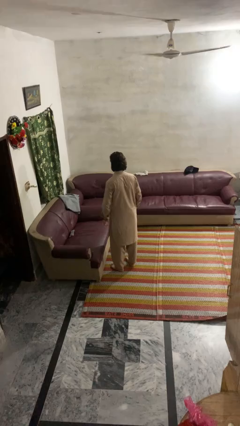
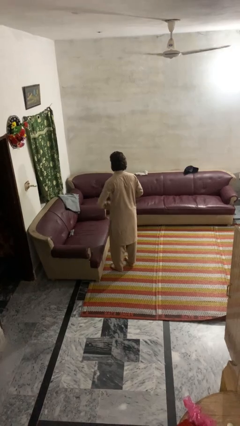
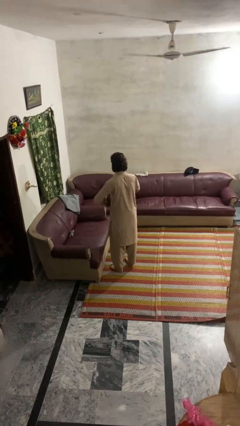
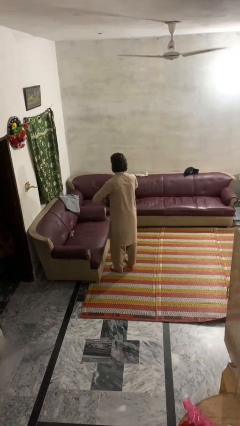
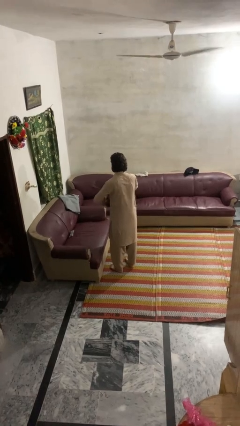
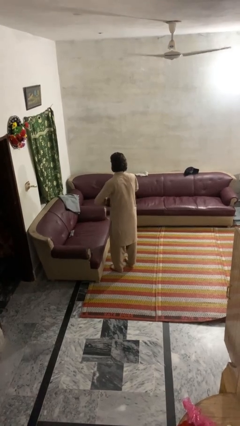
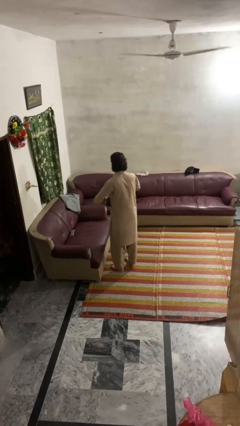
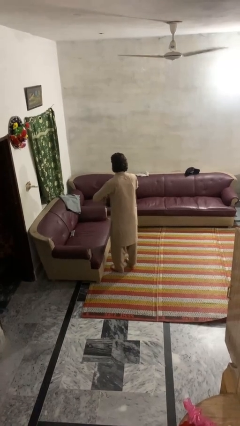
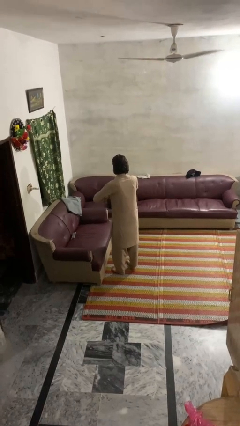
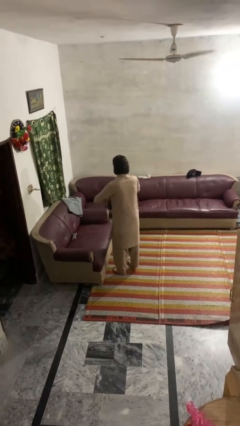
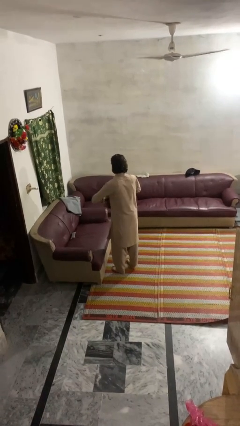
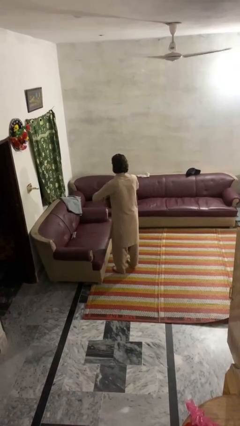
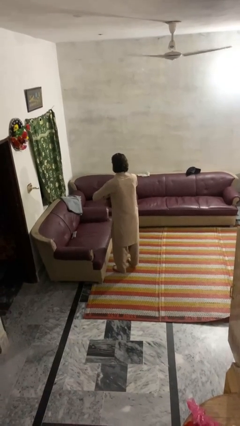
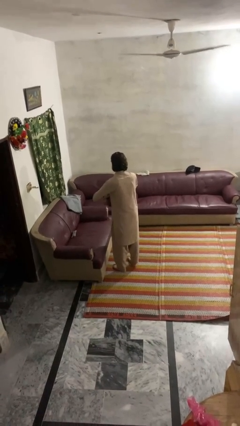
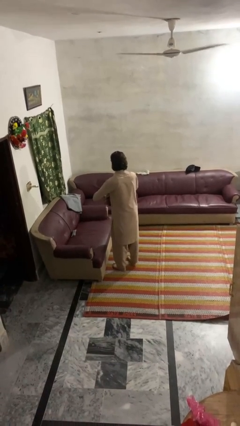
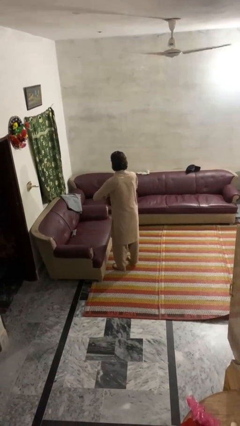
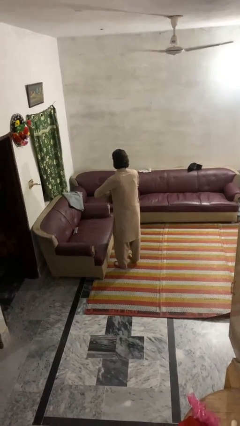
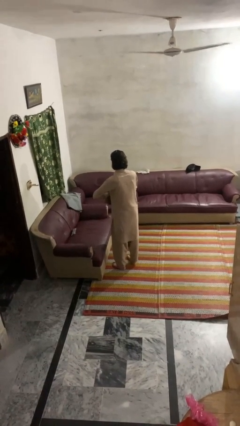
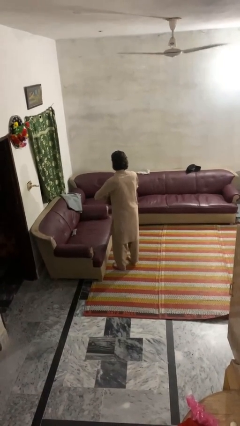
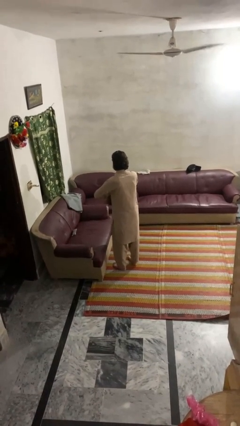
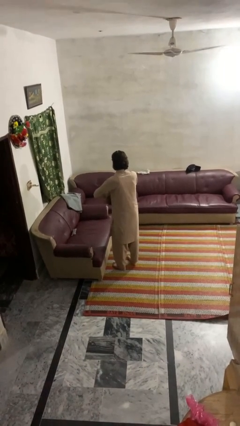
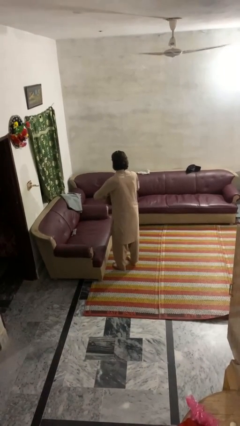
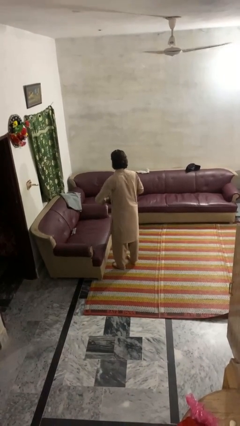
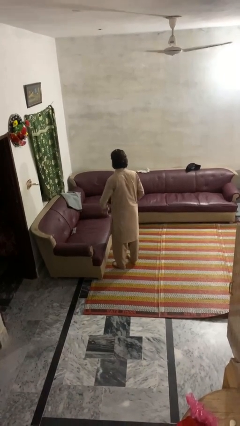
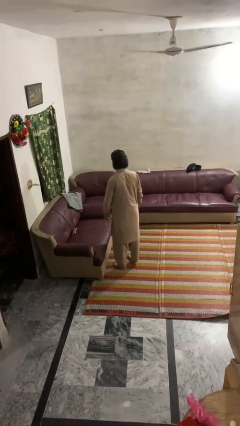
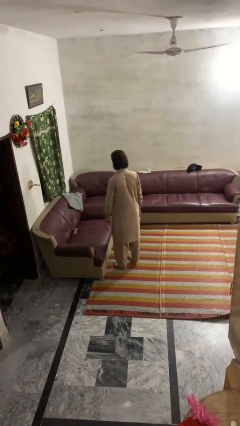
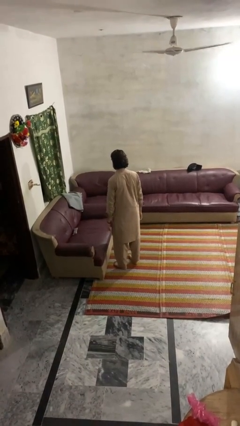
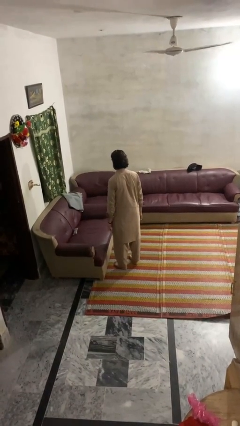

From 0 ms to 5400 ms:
person cracks knuckles

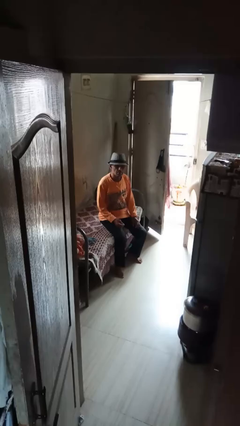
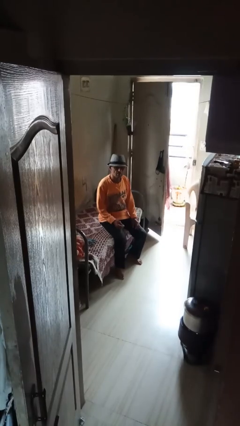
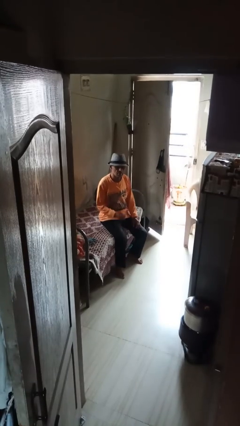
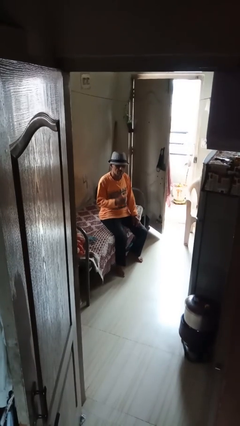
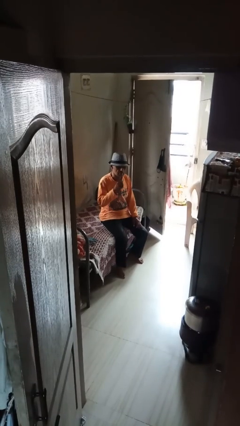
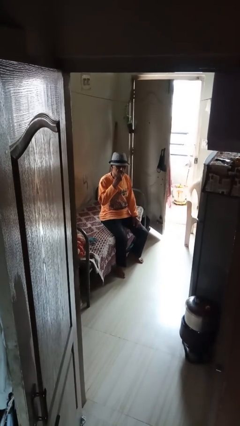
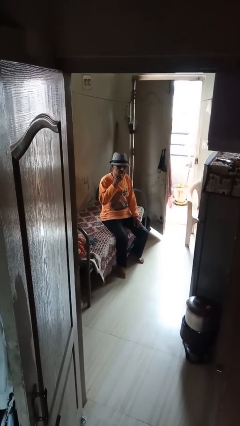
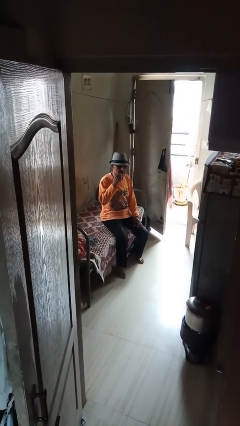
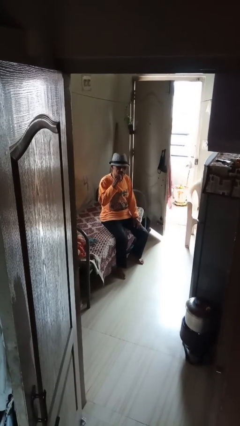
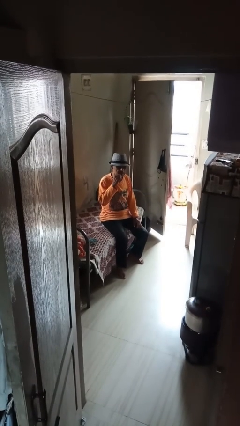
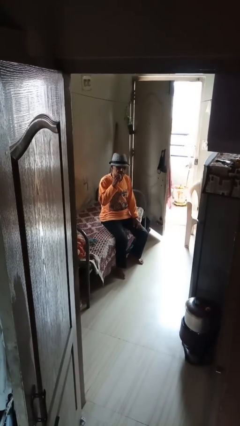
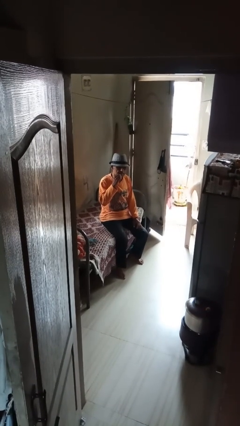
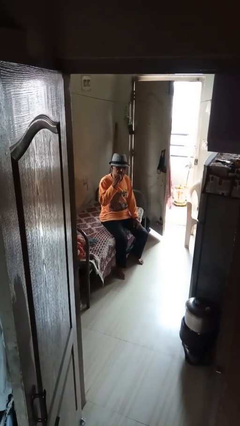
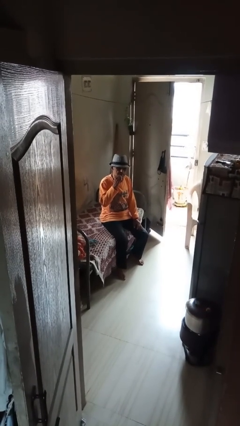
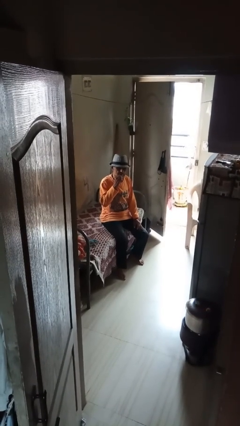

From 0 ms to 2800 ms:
person flosses

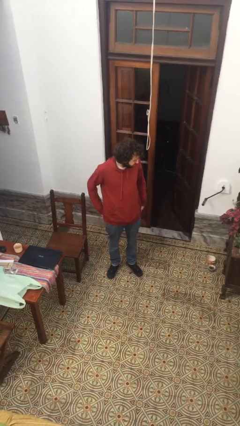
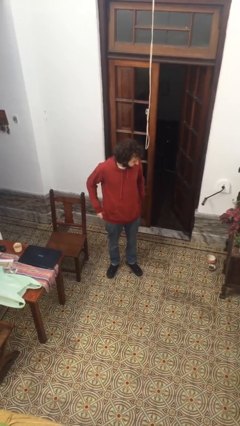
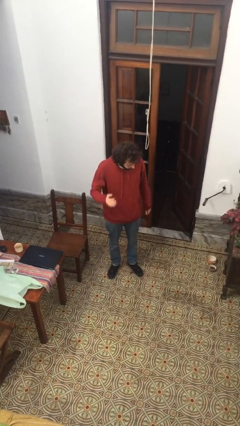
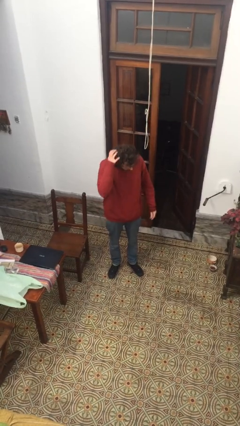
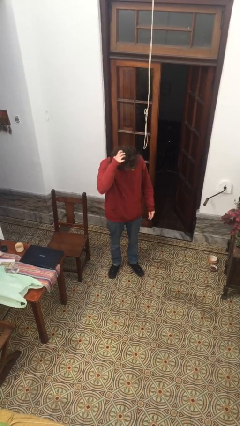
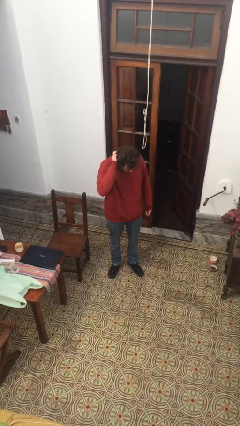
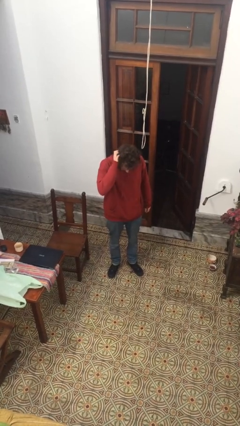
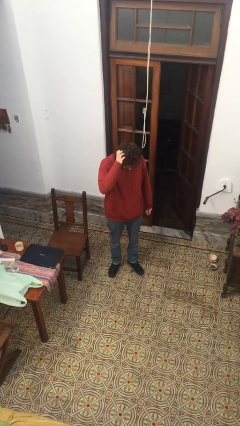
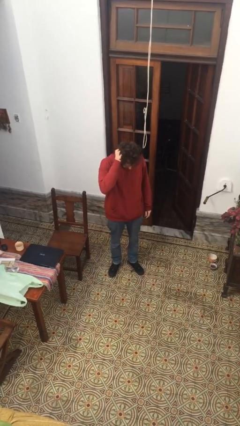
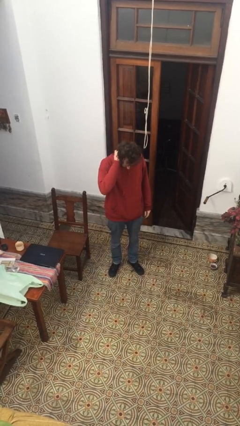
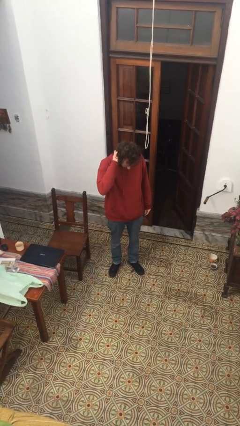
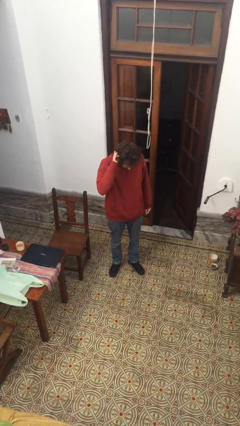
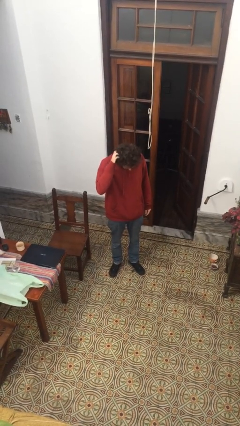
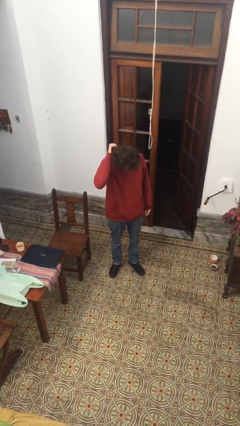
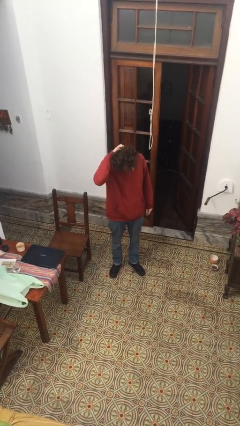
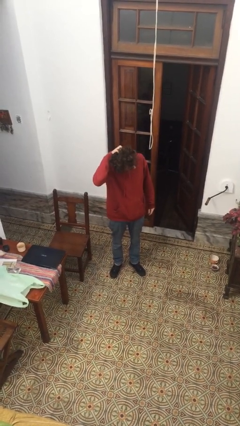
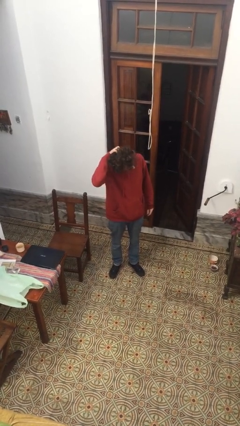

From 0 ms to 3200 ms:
person scratches face

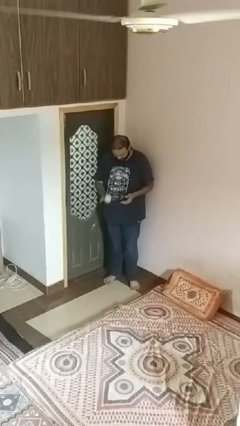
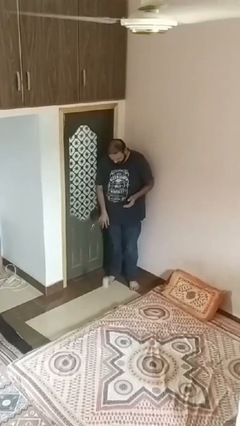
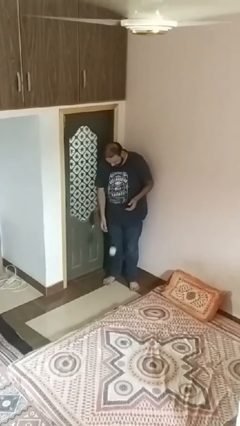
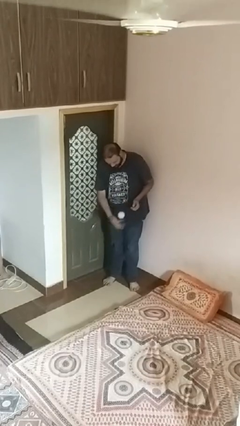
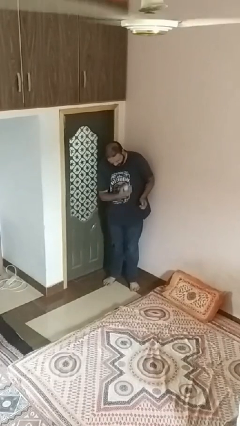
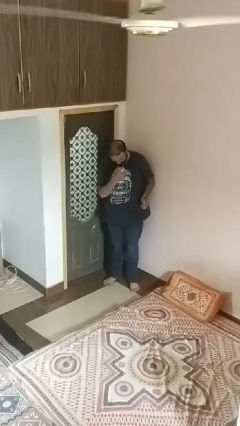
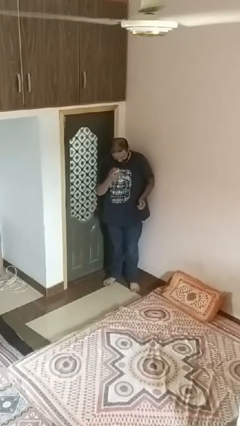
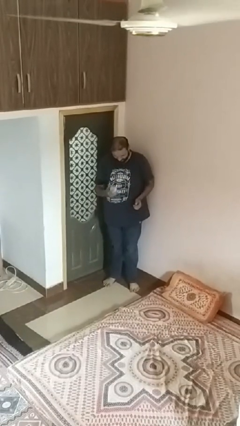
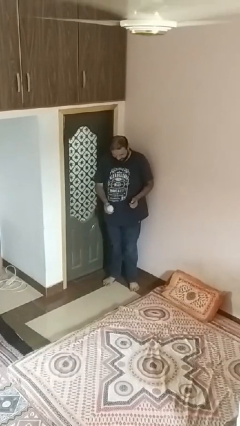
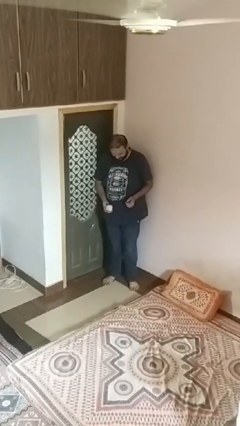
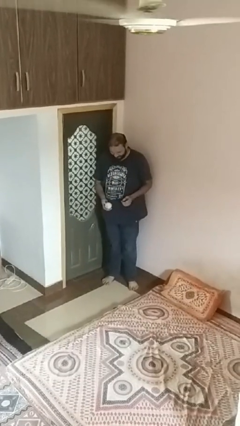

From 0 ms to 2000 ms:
person bounces ball on floor

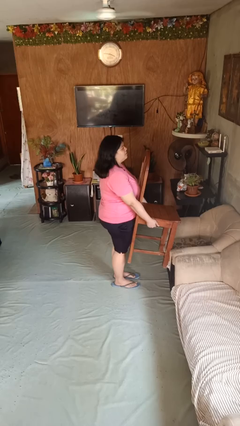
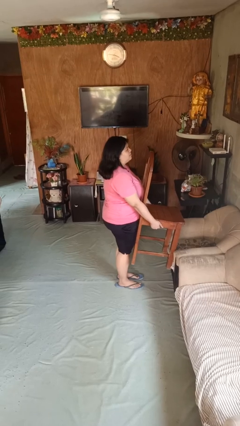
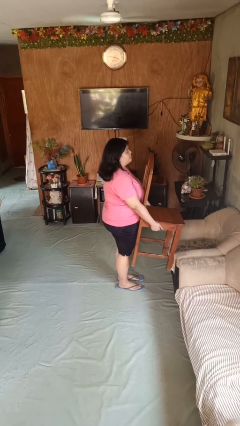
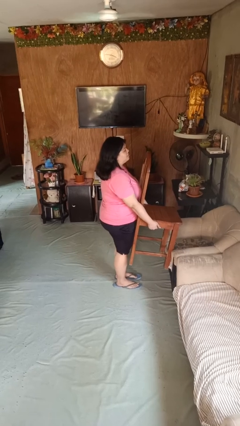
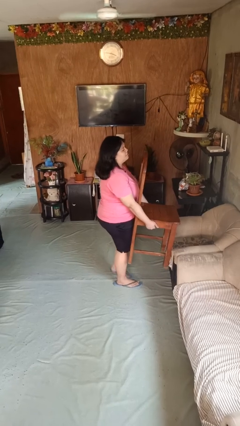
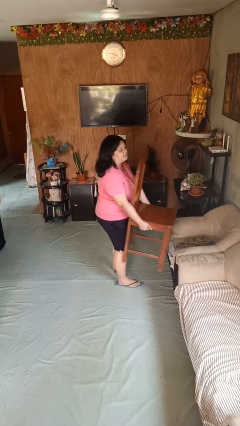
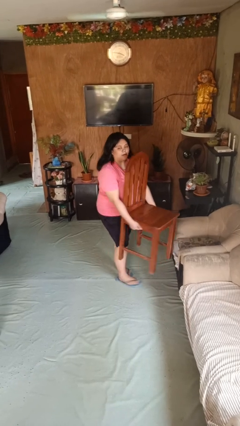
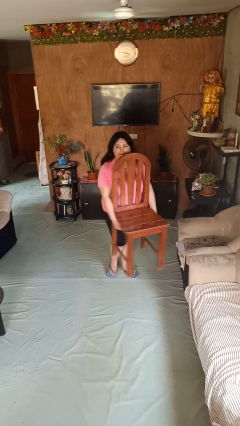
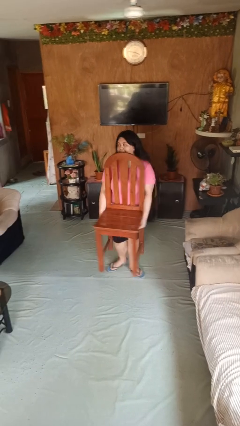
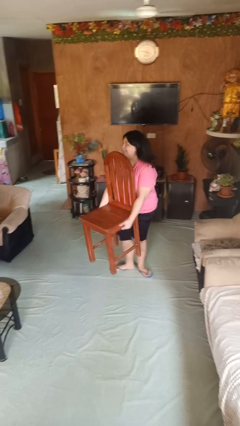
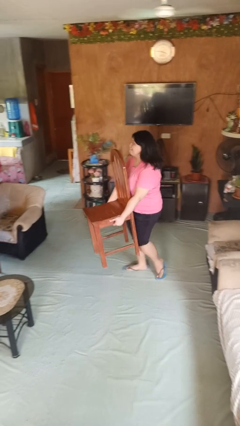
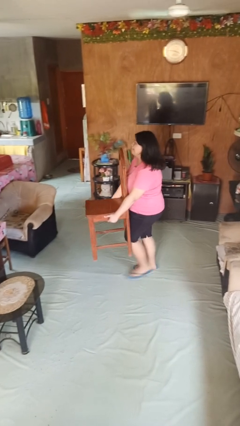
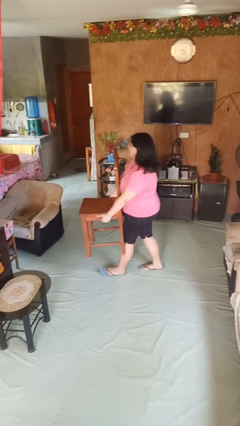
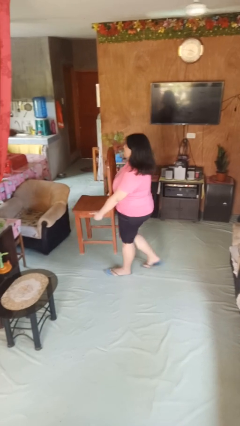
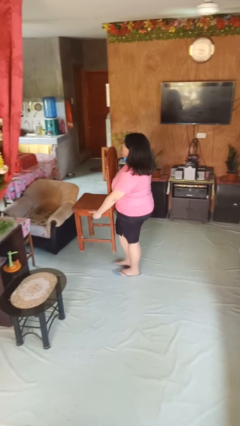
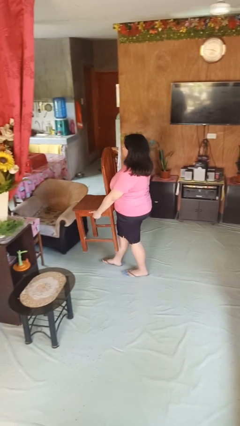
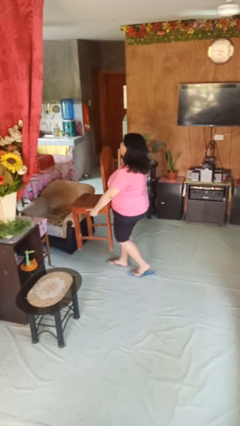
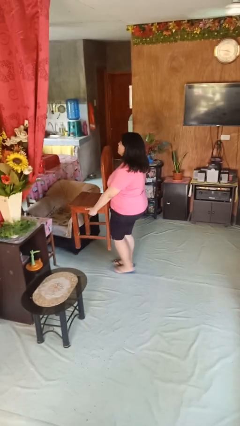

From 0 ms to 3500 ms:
person carries furniture

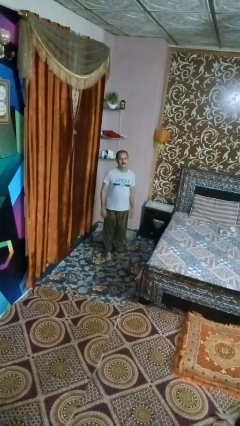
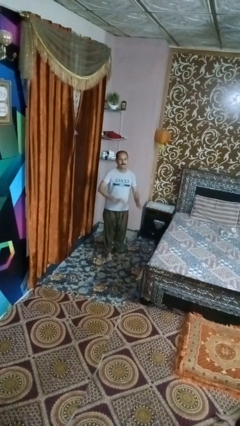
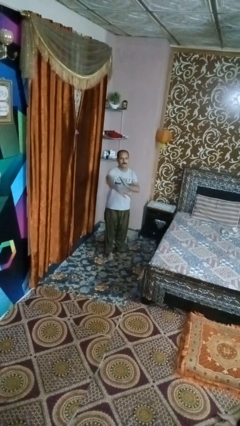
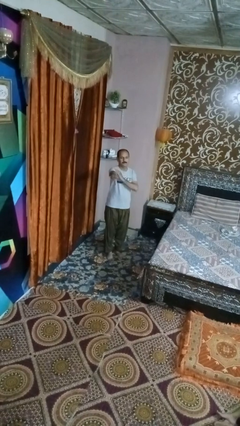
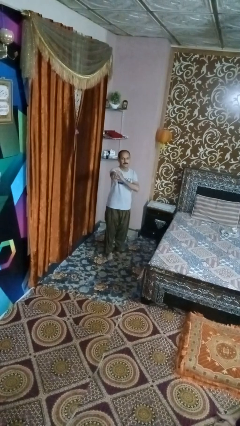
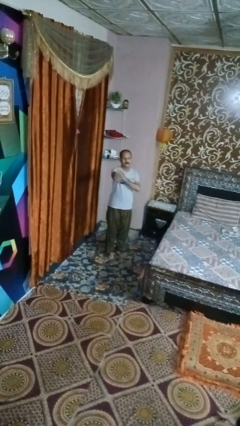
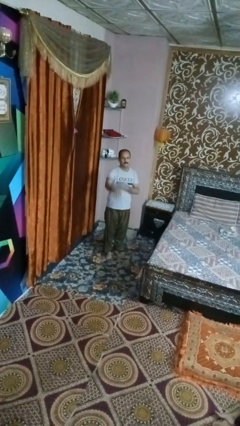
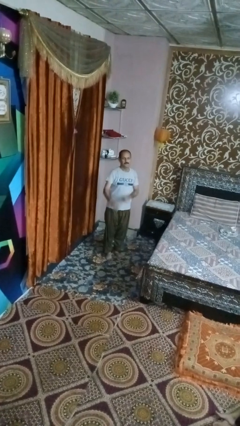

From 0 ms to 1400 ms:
person karate chop
